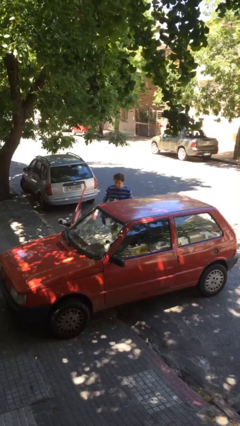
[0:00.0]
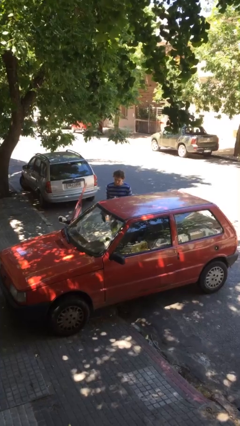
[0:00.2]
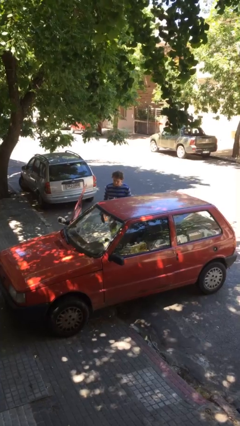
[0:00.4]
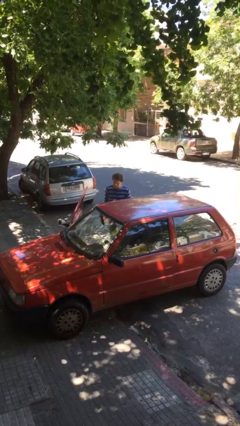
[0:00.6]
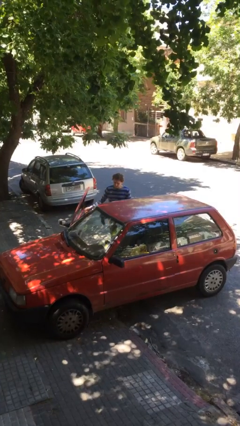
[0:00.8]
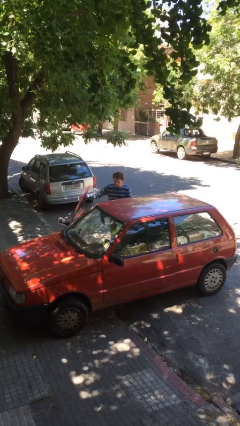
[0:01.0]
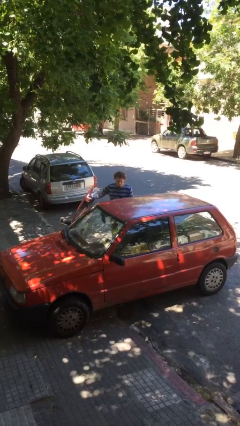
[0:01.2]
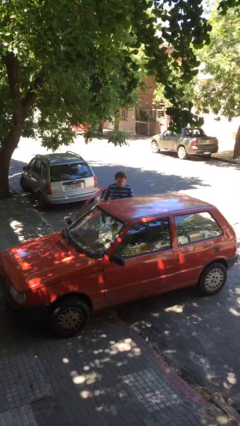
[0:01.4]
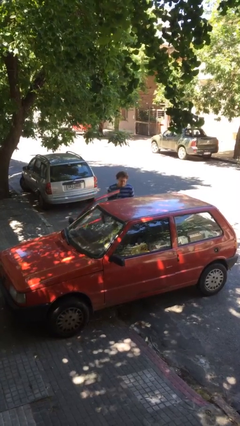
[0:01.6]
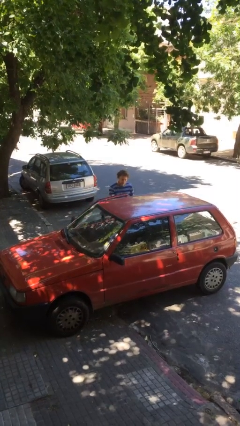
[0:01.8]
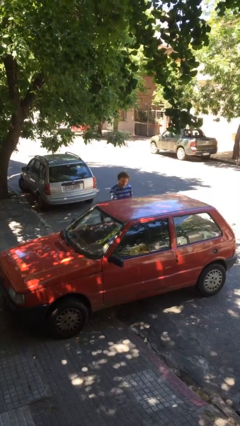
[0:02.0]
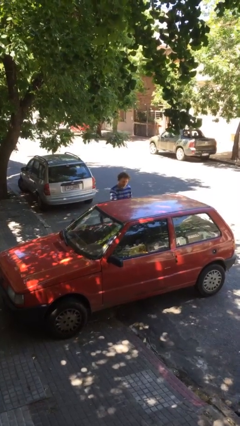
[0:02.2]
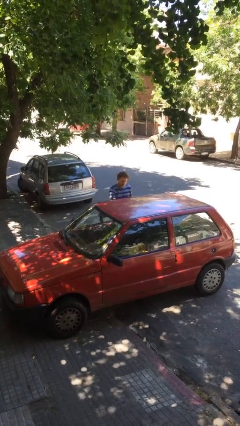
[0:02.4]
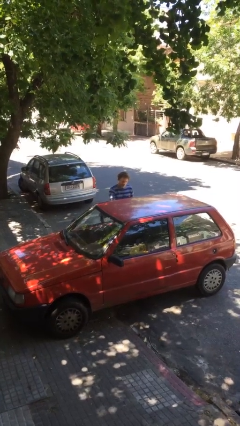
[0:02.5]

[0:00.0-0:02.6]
person closes car door

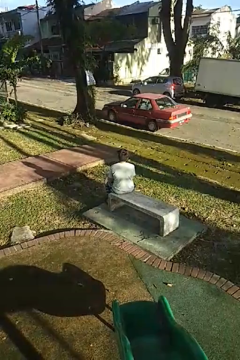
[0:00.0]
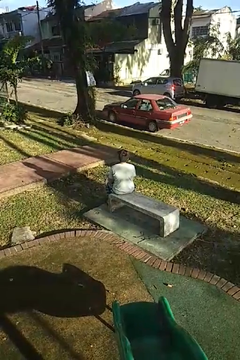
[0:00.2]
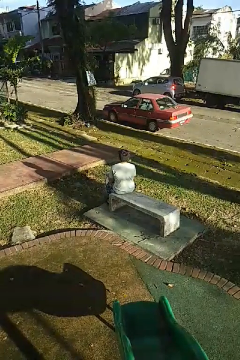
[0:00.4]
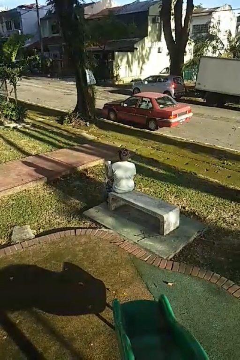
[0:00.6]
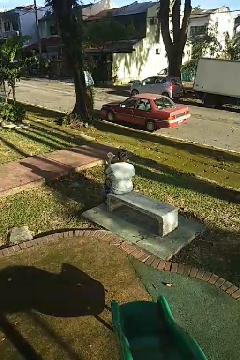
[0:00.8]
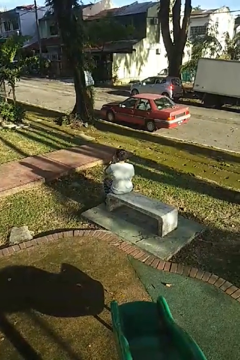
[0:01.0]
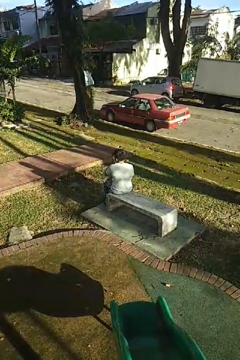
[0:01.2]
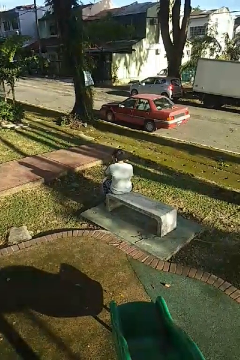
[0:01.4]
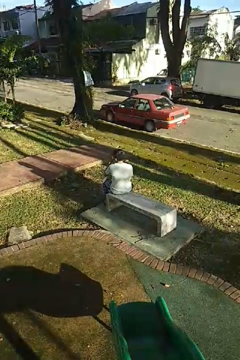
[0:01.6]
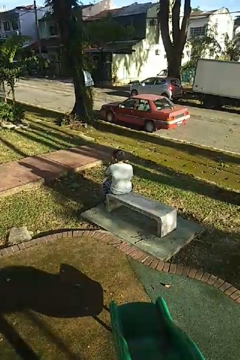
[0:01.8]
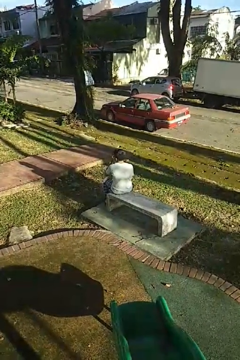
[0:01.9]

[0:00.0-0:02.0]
person blows nose

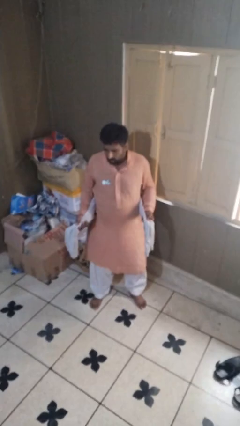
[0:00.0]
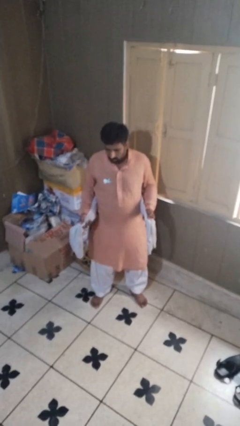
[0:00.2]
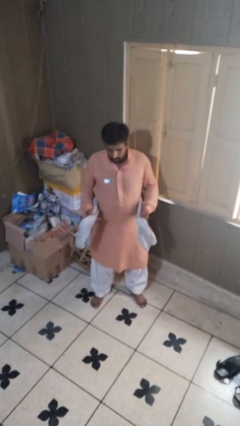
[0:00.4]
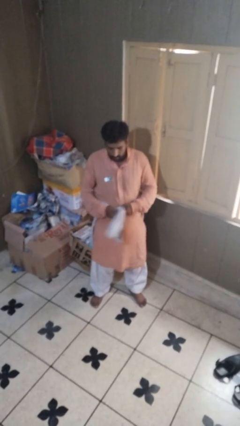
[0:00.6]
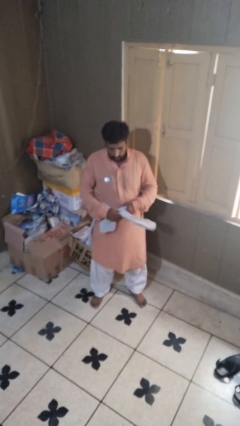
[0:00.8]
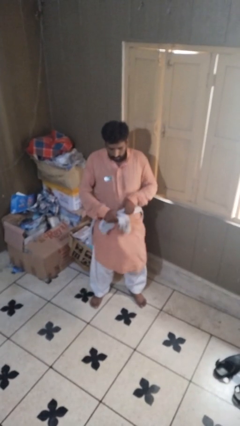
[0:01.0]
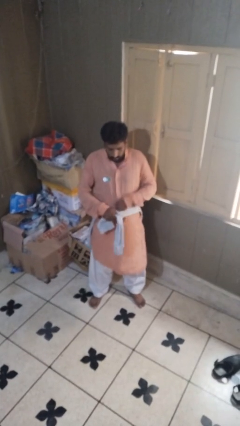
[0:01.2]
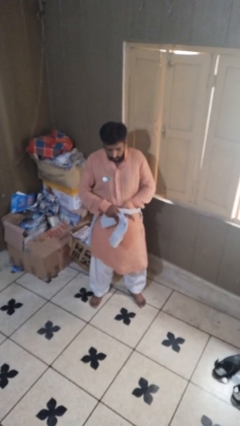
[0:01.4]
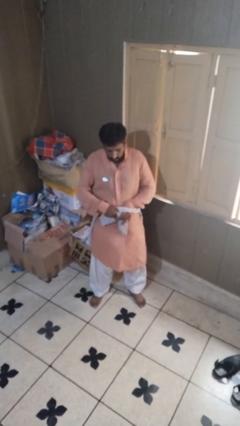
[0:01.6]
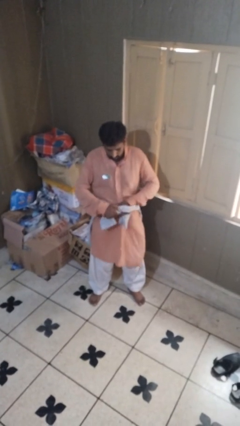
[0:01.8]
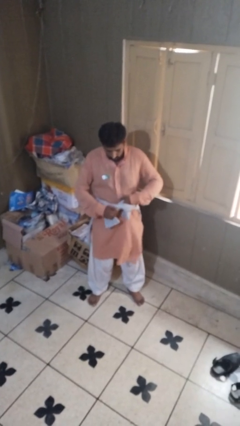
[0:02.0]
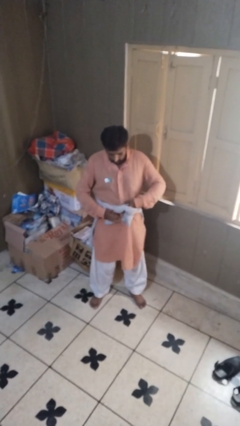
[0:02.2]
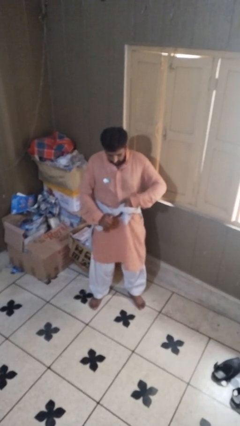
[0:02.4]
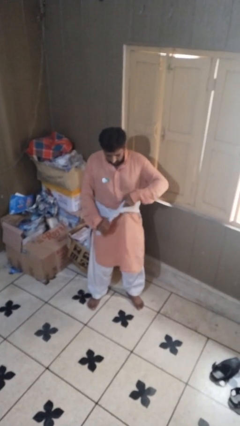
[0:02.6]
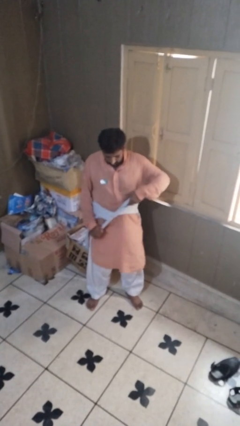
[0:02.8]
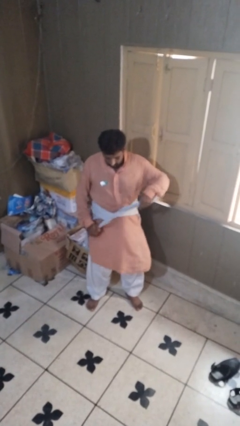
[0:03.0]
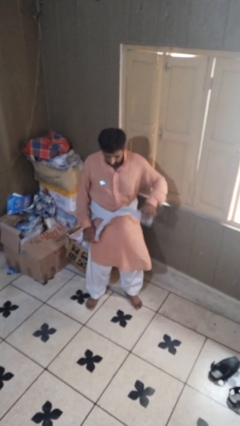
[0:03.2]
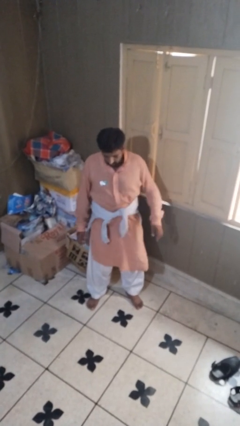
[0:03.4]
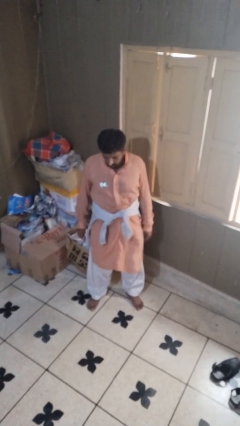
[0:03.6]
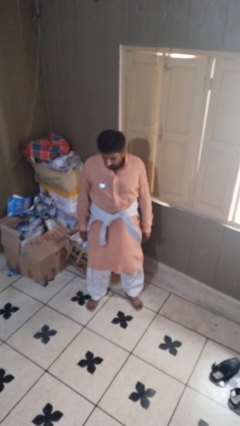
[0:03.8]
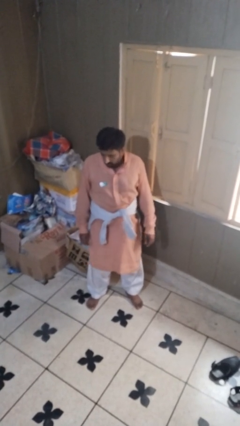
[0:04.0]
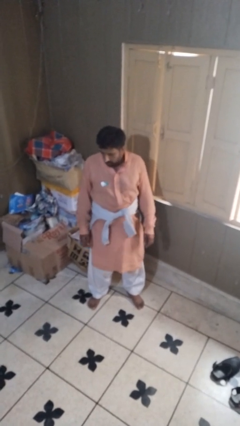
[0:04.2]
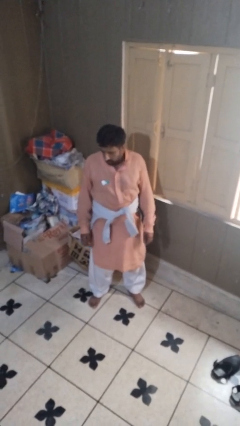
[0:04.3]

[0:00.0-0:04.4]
person ties jacket around waist

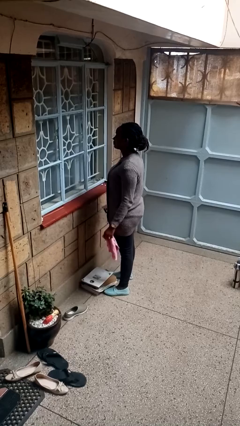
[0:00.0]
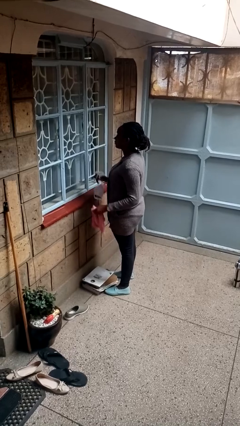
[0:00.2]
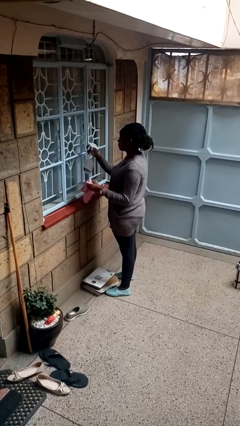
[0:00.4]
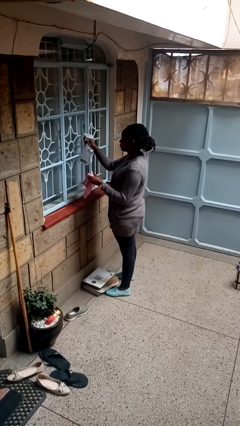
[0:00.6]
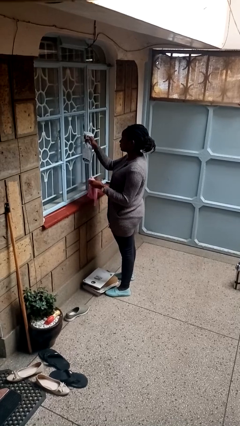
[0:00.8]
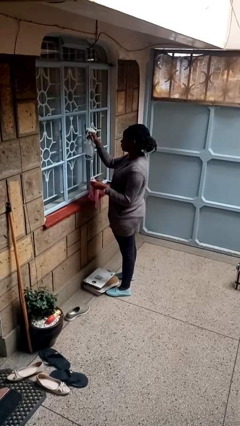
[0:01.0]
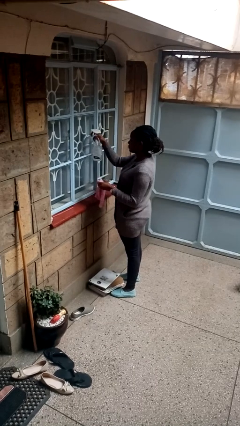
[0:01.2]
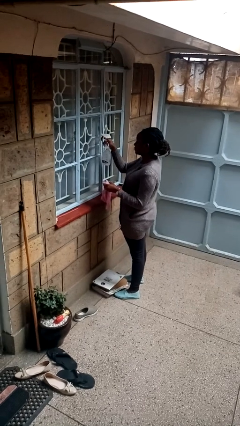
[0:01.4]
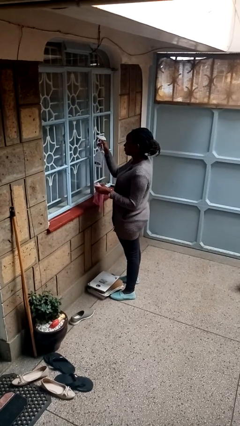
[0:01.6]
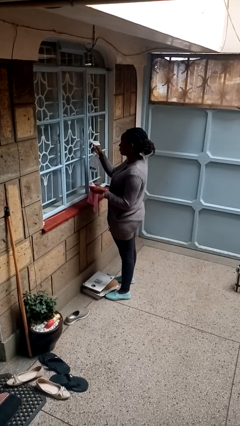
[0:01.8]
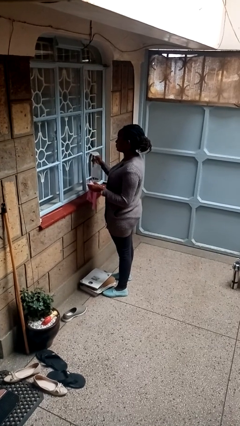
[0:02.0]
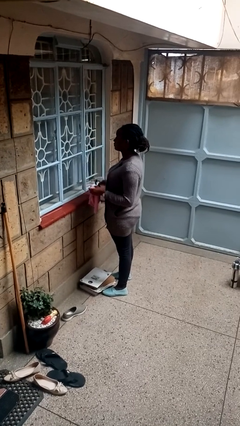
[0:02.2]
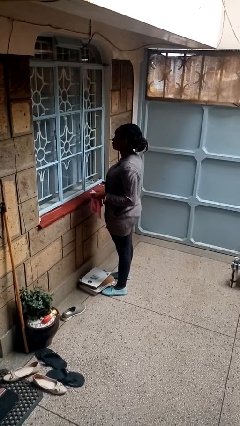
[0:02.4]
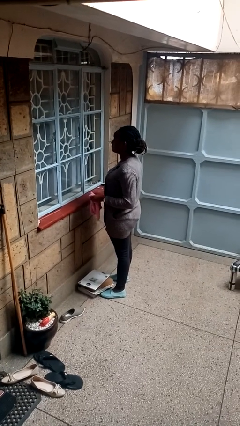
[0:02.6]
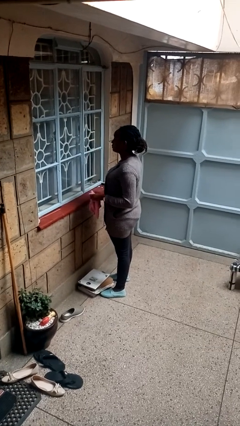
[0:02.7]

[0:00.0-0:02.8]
person sprays from bottle

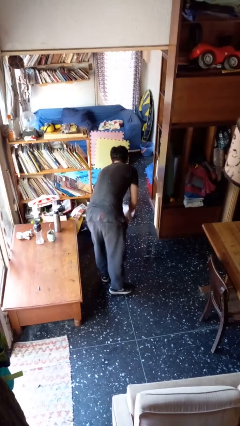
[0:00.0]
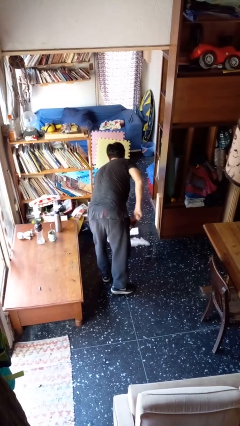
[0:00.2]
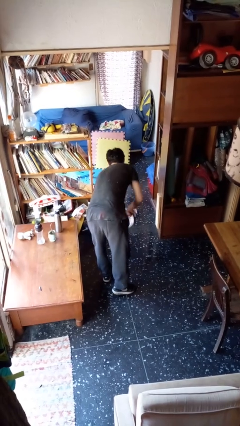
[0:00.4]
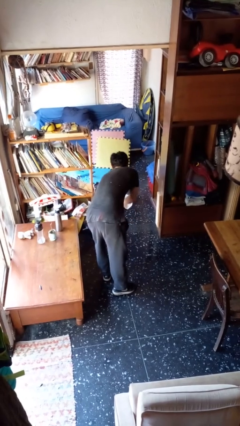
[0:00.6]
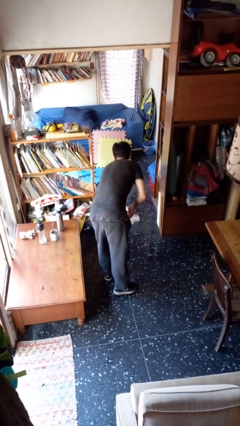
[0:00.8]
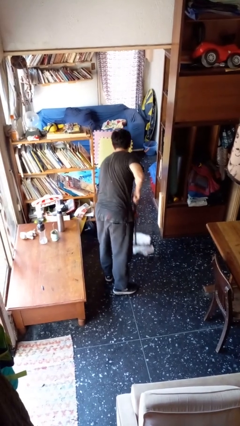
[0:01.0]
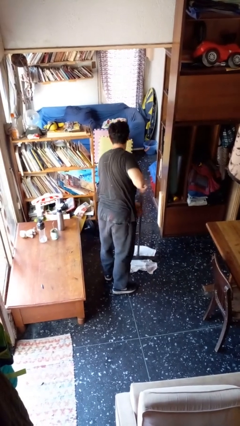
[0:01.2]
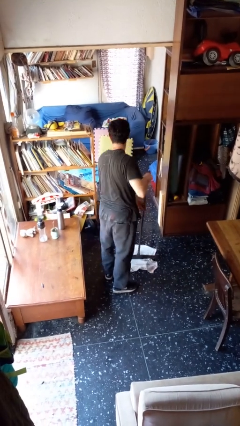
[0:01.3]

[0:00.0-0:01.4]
person mops

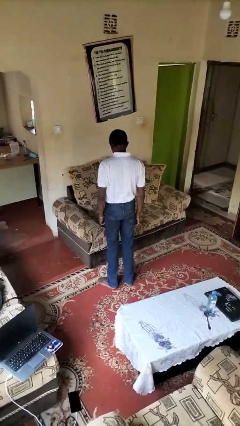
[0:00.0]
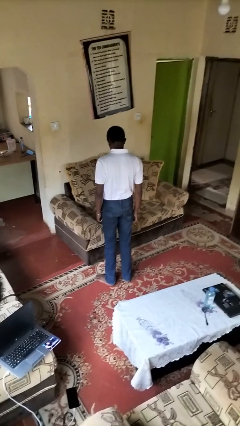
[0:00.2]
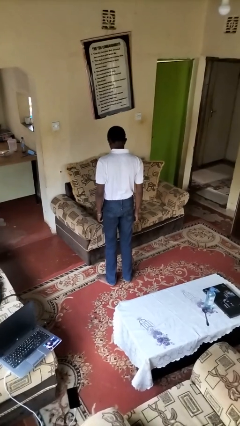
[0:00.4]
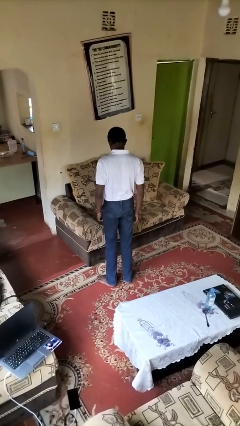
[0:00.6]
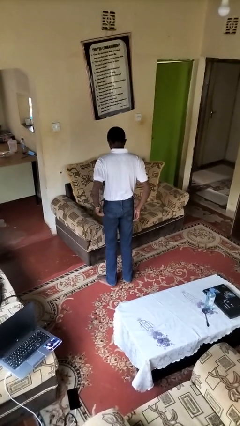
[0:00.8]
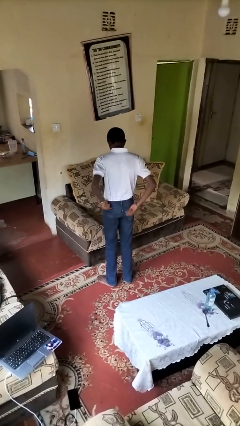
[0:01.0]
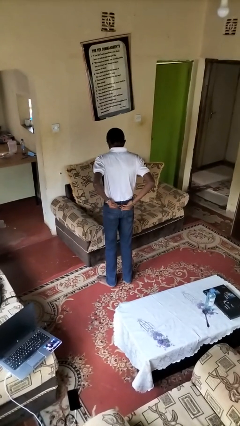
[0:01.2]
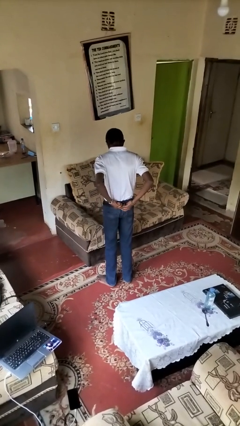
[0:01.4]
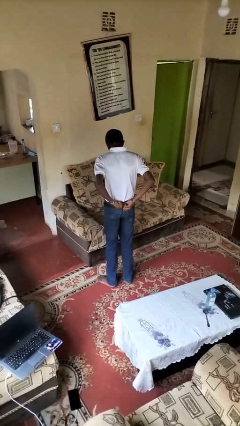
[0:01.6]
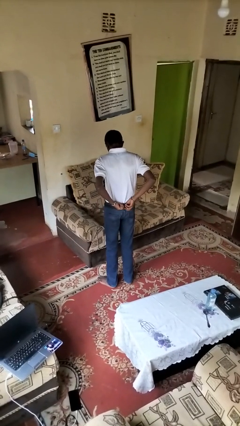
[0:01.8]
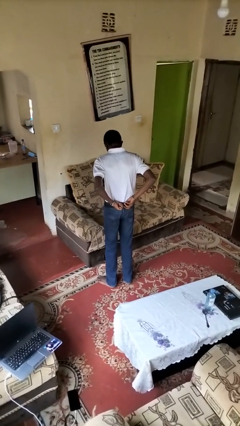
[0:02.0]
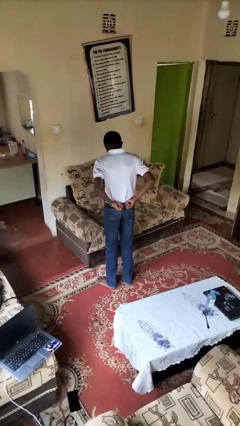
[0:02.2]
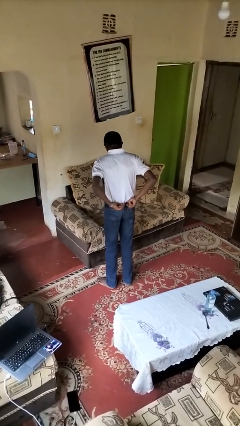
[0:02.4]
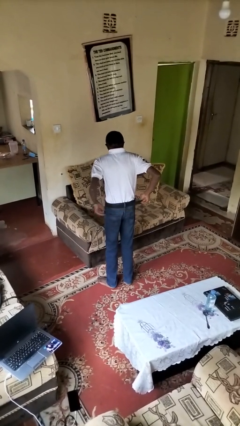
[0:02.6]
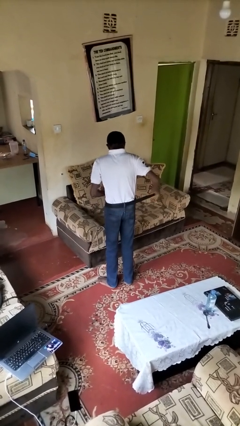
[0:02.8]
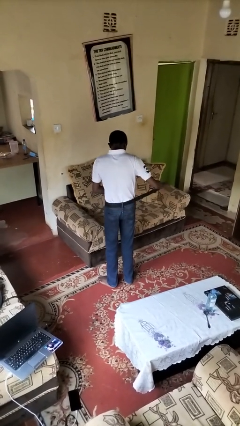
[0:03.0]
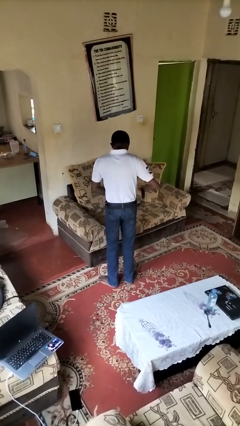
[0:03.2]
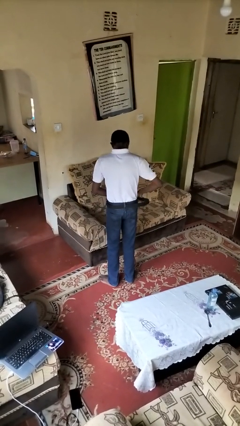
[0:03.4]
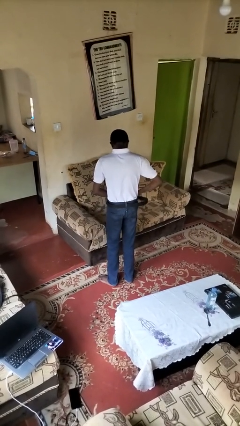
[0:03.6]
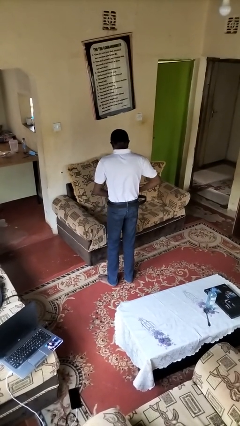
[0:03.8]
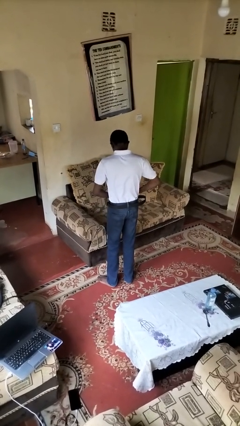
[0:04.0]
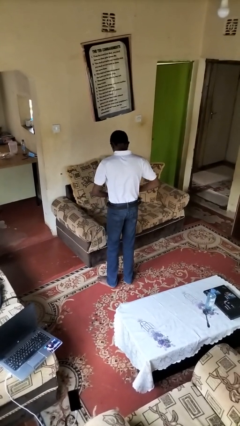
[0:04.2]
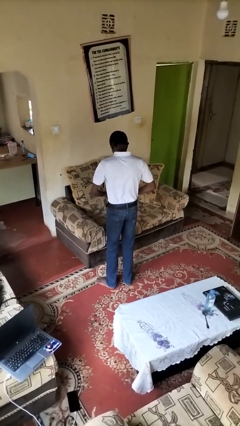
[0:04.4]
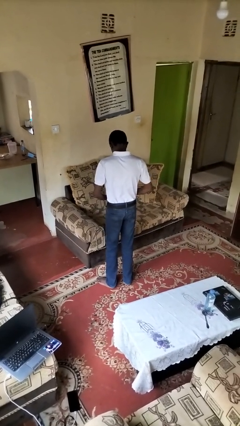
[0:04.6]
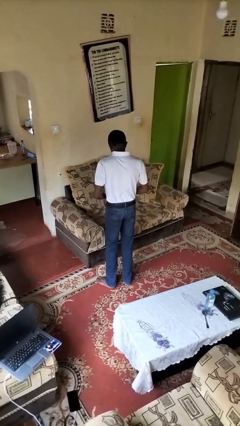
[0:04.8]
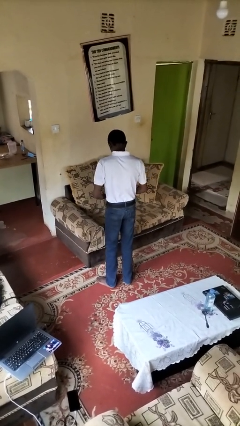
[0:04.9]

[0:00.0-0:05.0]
person puts on belt
